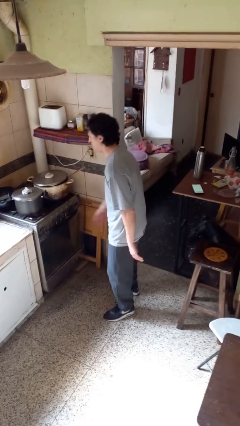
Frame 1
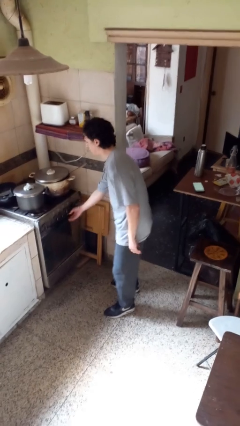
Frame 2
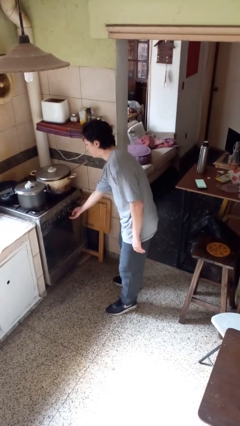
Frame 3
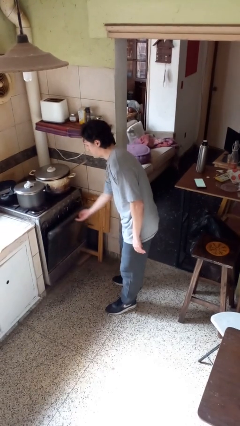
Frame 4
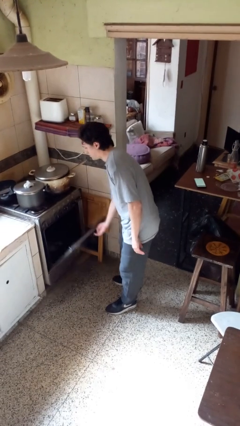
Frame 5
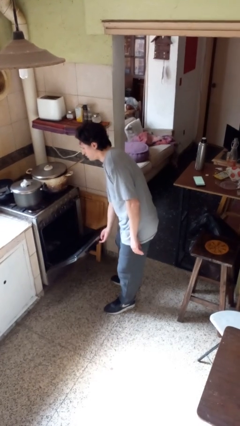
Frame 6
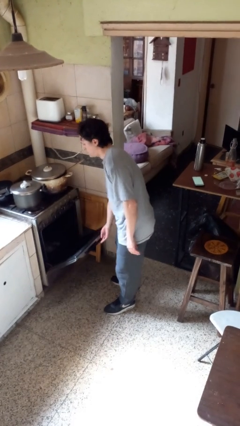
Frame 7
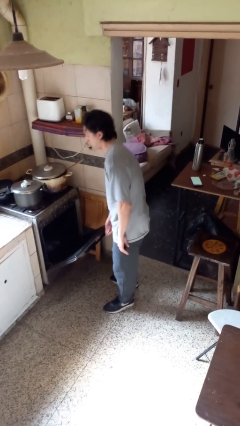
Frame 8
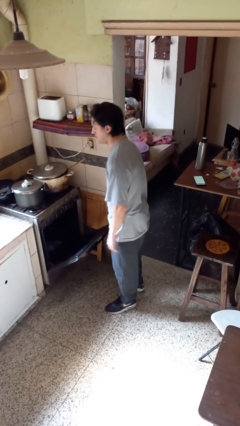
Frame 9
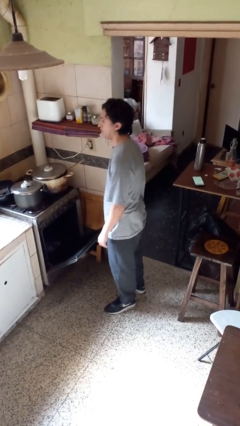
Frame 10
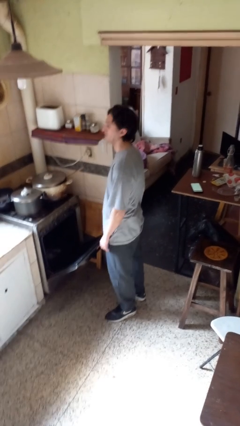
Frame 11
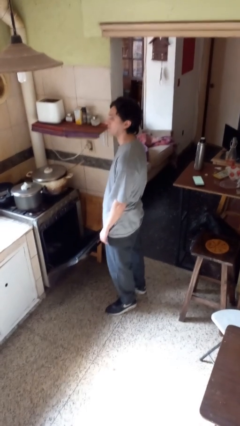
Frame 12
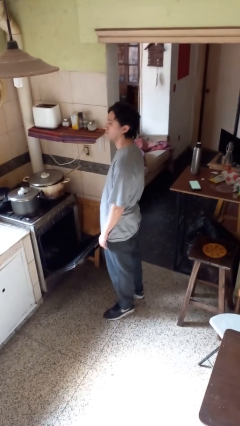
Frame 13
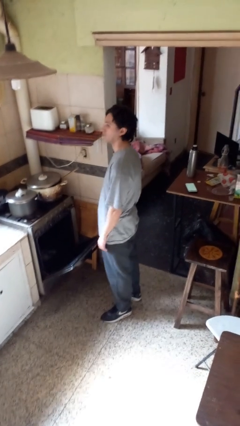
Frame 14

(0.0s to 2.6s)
person opens oven door

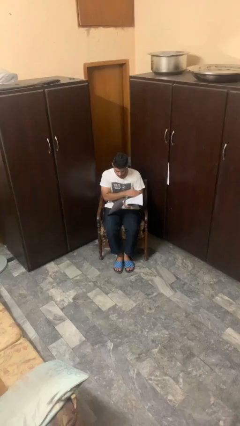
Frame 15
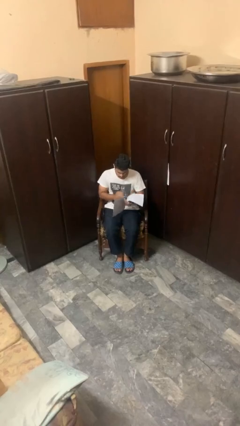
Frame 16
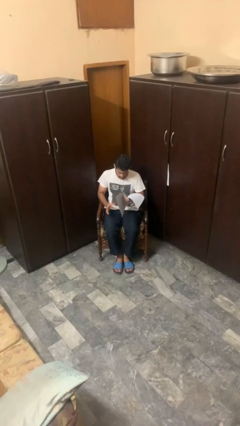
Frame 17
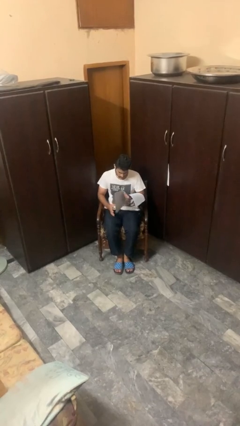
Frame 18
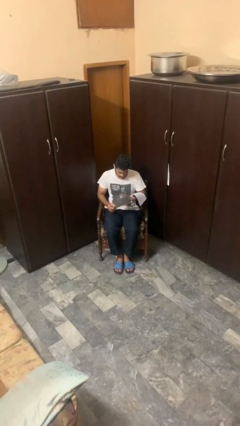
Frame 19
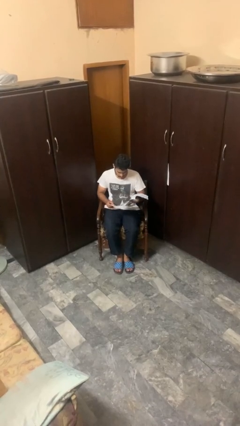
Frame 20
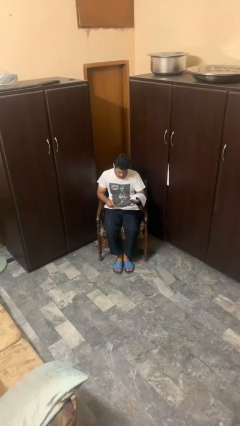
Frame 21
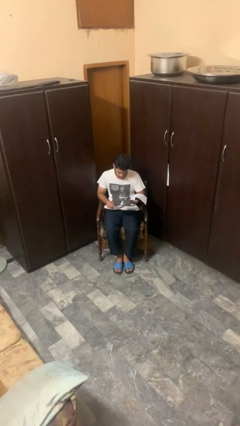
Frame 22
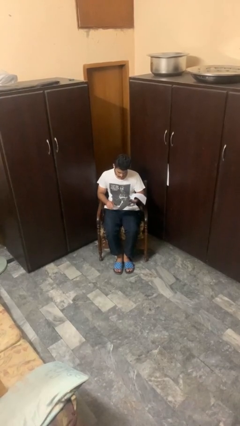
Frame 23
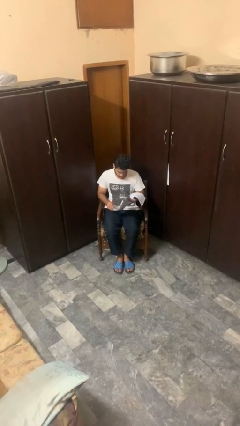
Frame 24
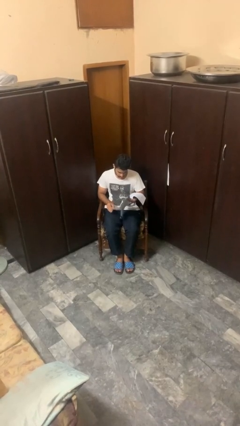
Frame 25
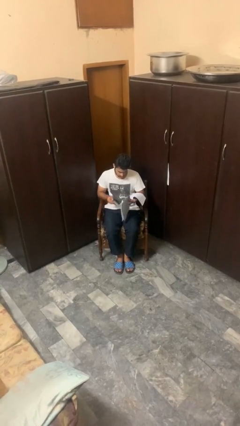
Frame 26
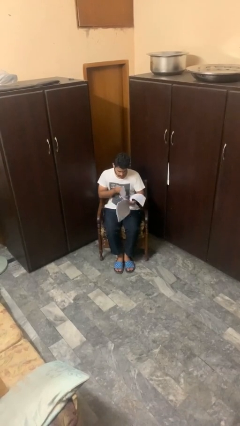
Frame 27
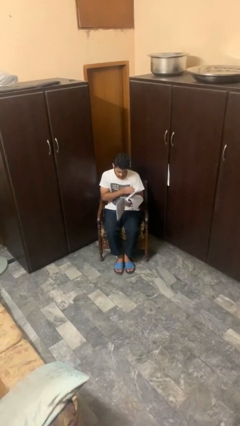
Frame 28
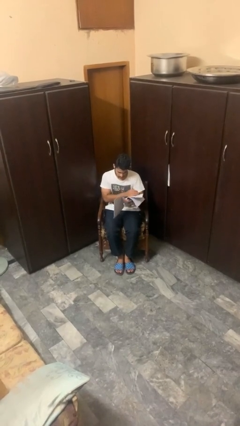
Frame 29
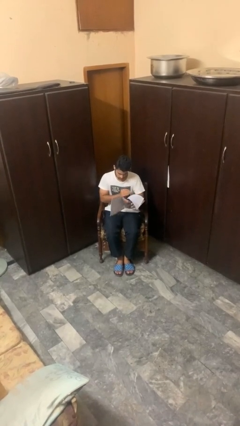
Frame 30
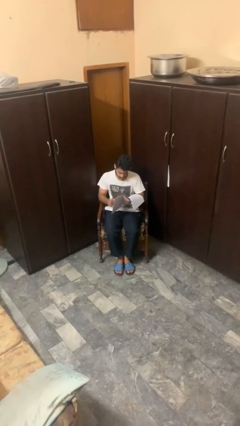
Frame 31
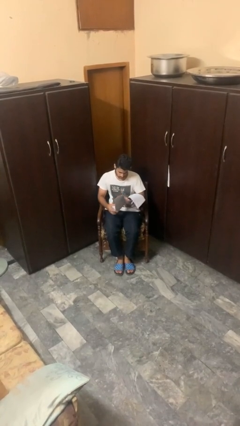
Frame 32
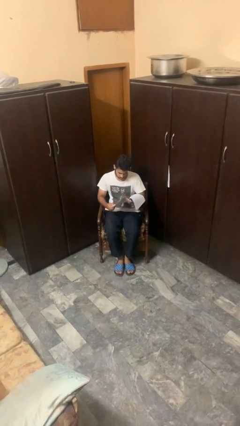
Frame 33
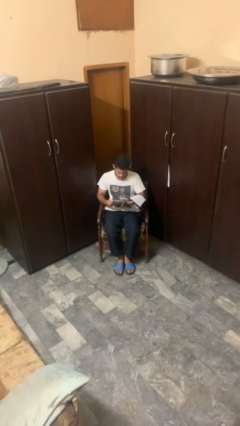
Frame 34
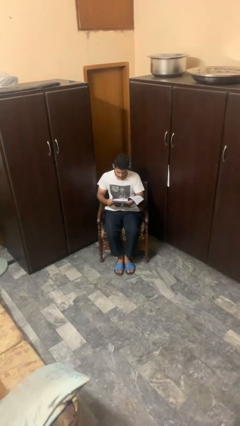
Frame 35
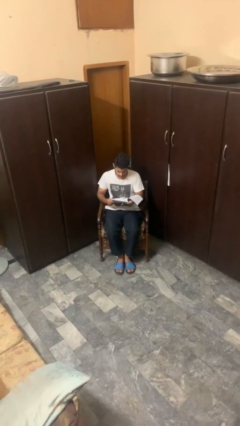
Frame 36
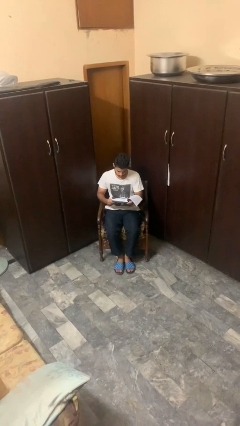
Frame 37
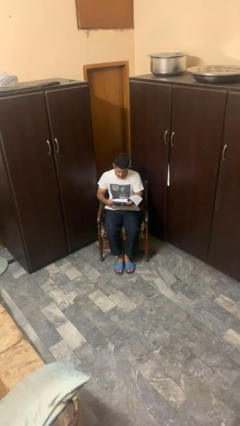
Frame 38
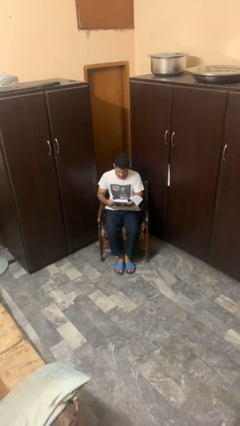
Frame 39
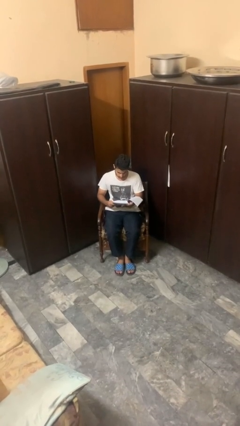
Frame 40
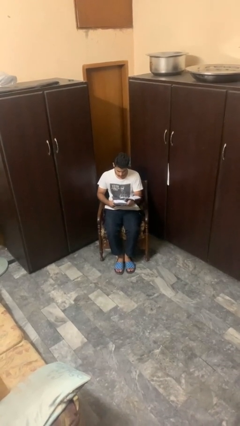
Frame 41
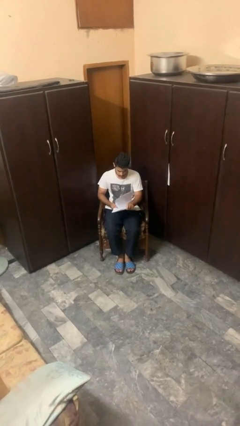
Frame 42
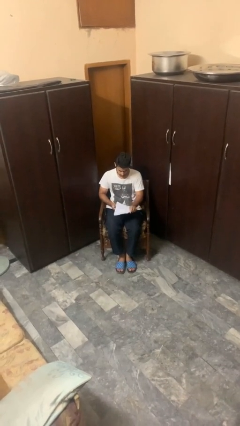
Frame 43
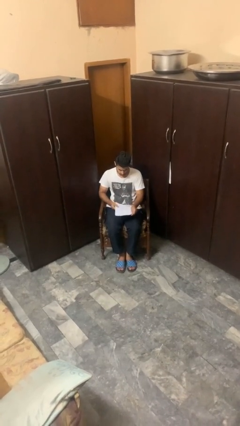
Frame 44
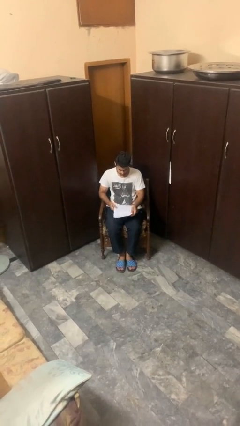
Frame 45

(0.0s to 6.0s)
person reads magazine

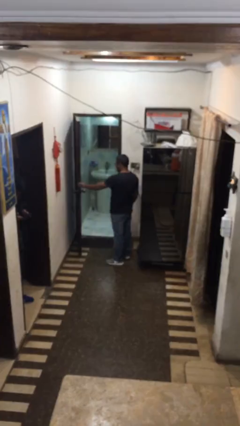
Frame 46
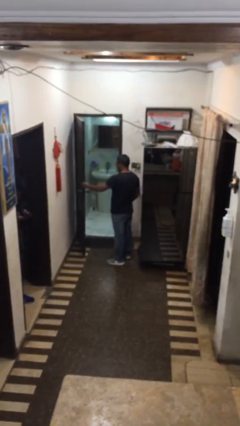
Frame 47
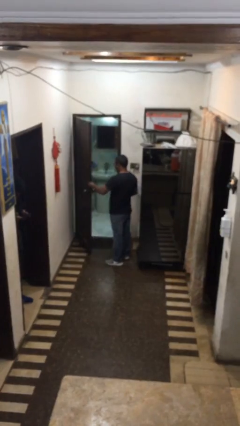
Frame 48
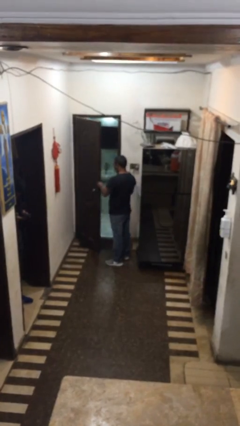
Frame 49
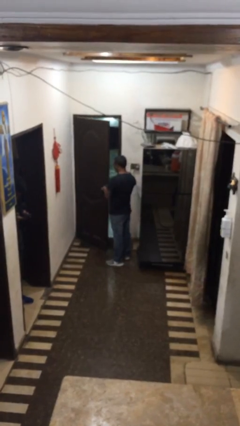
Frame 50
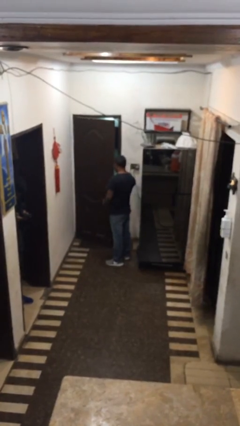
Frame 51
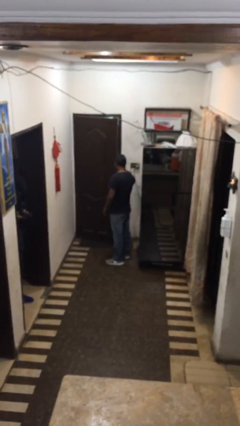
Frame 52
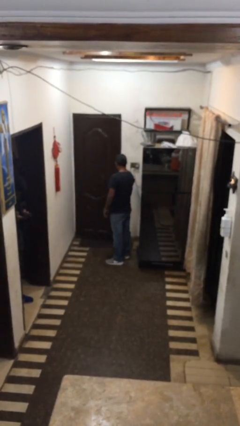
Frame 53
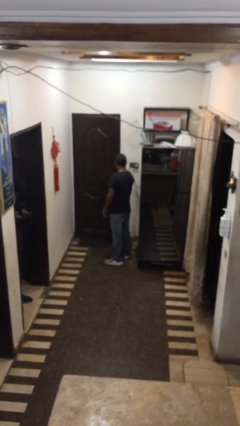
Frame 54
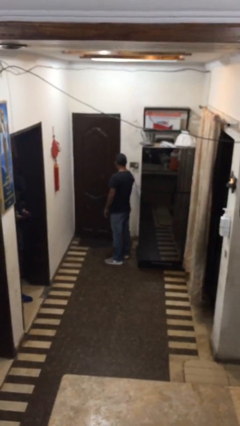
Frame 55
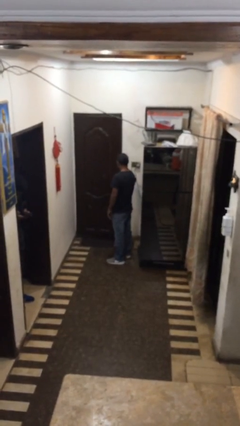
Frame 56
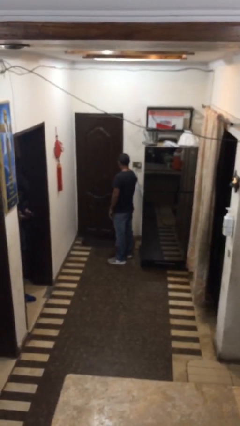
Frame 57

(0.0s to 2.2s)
person closes facility door

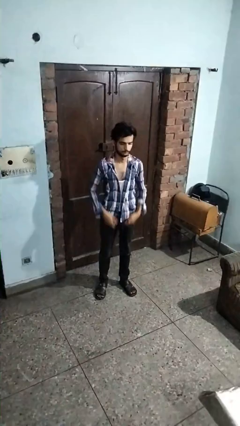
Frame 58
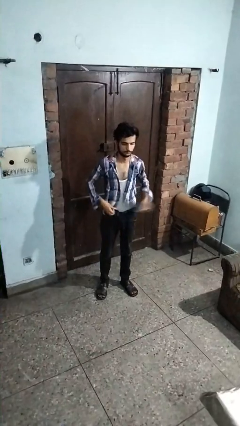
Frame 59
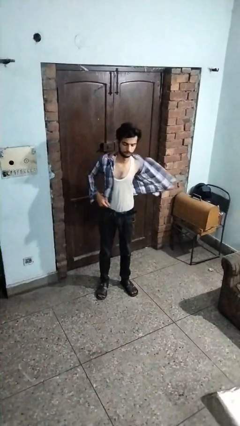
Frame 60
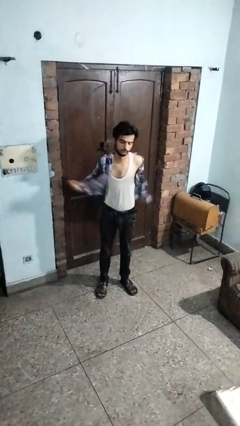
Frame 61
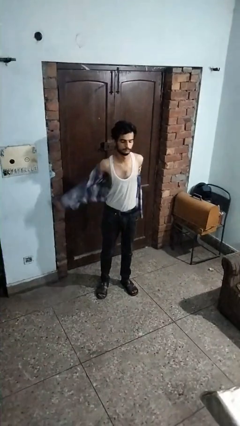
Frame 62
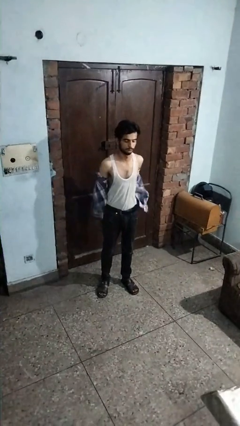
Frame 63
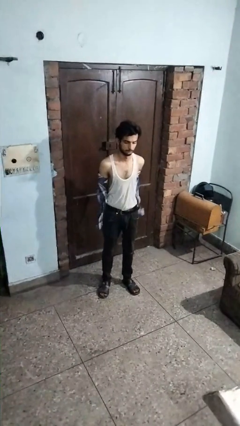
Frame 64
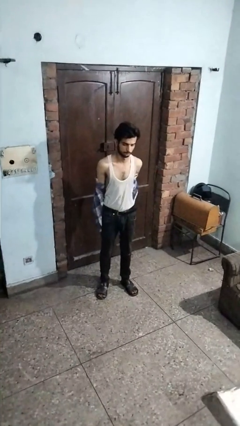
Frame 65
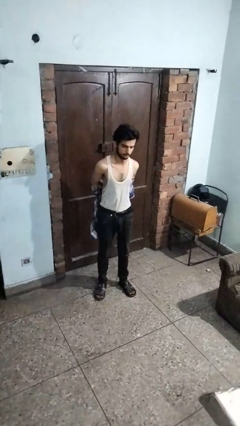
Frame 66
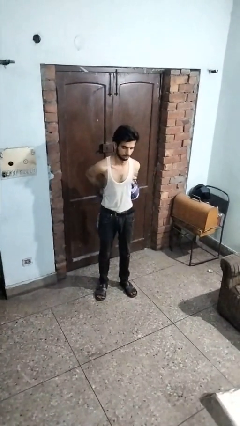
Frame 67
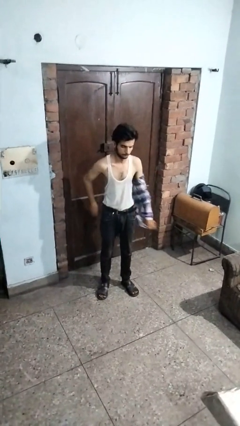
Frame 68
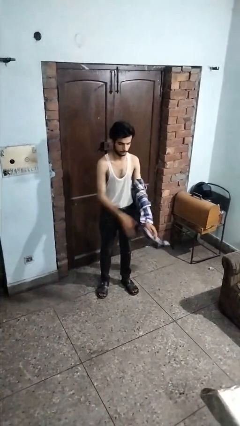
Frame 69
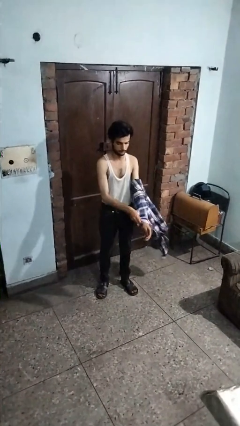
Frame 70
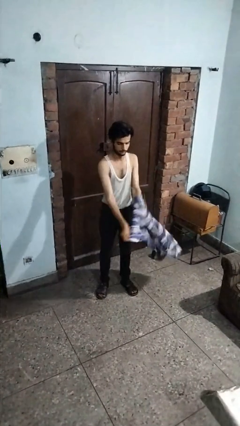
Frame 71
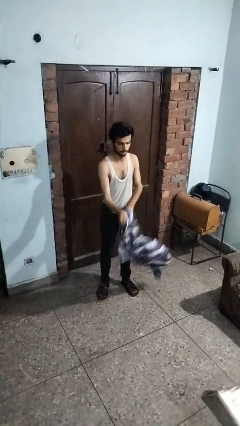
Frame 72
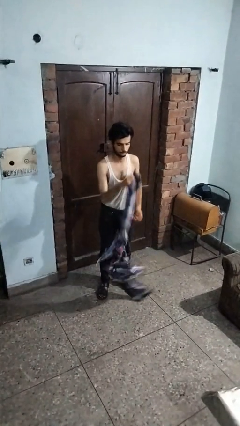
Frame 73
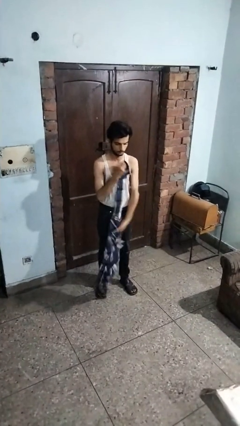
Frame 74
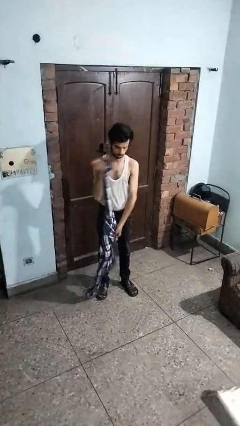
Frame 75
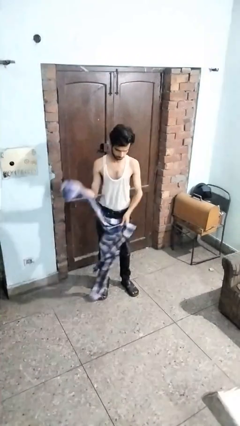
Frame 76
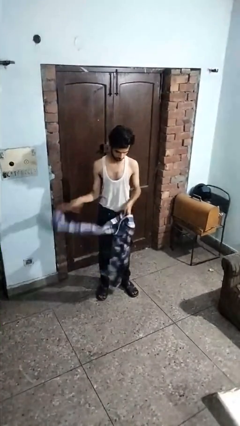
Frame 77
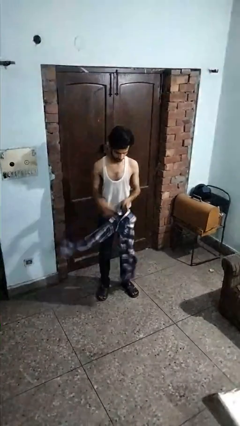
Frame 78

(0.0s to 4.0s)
person takes off shirt

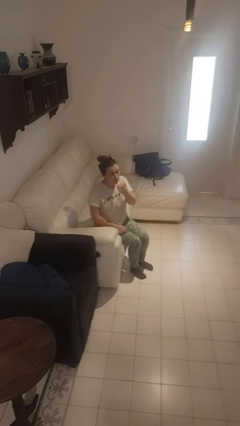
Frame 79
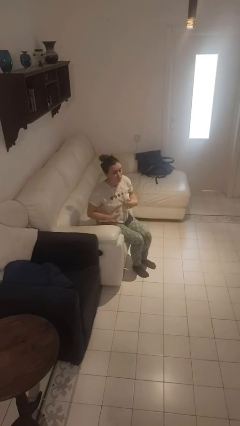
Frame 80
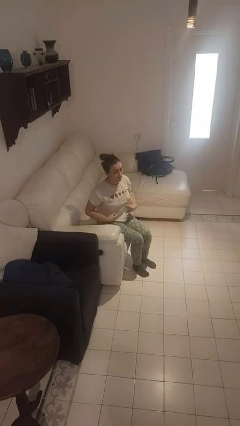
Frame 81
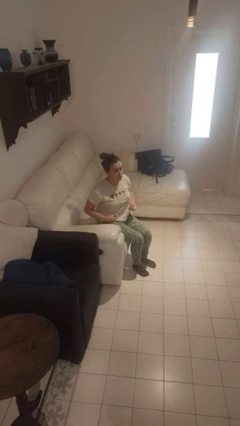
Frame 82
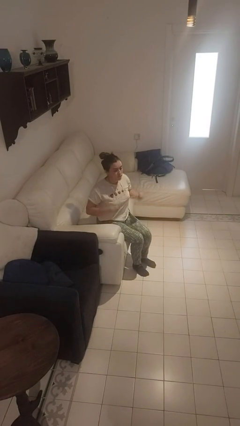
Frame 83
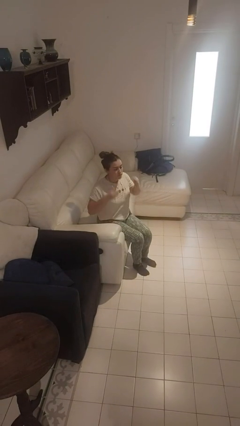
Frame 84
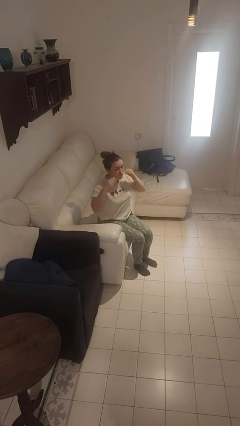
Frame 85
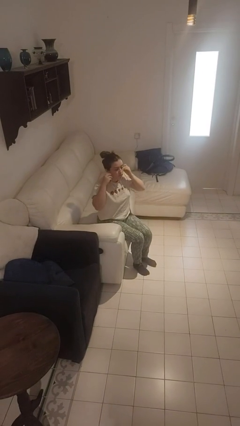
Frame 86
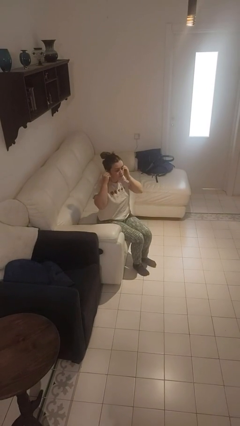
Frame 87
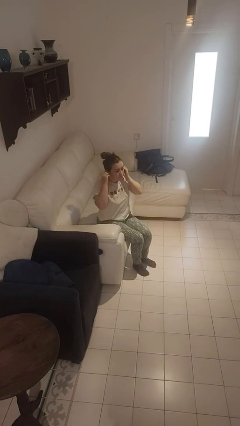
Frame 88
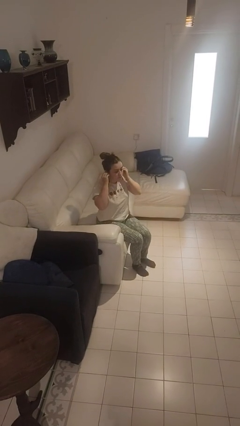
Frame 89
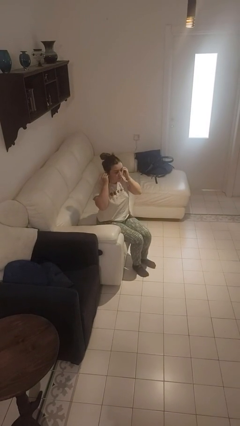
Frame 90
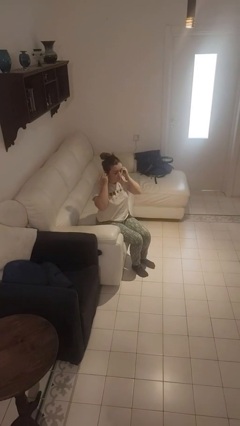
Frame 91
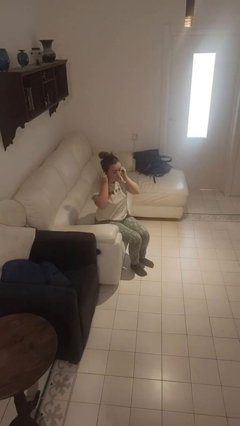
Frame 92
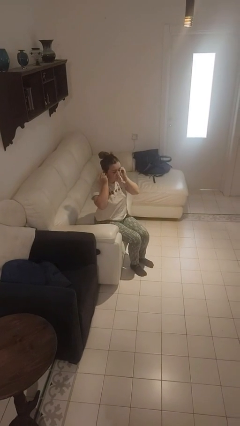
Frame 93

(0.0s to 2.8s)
person puts on headphones
